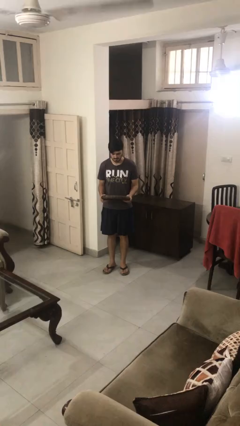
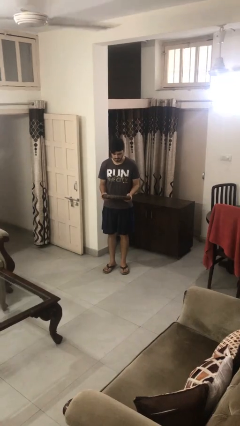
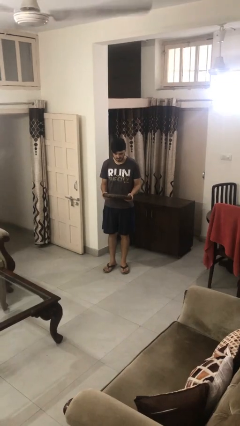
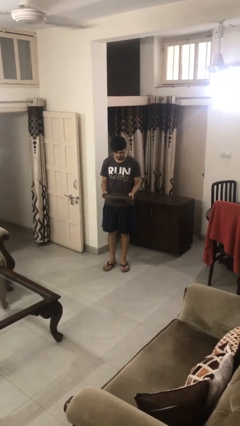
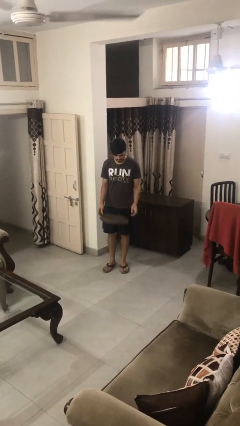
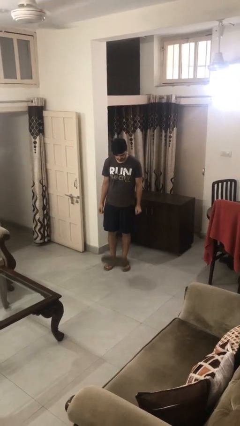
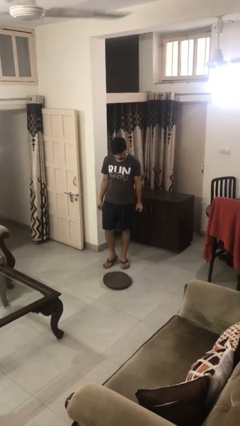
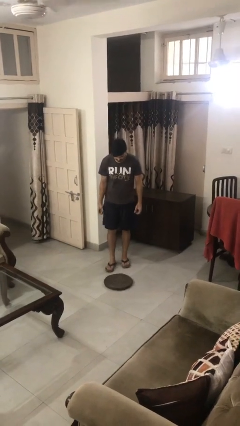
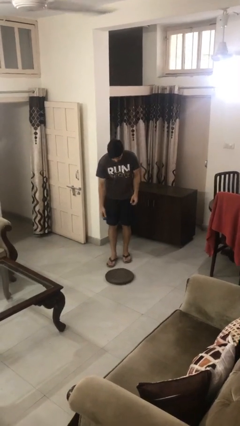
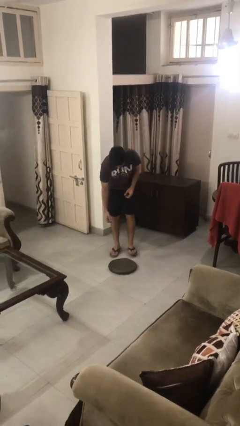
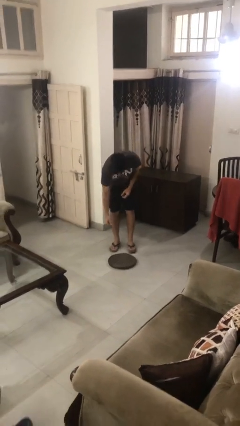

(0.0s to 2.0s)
person drops object

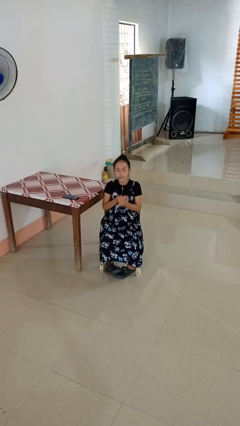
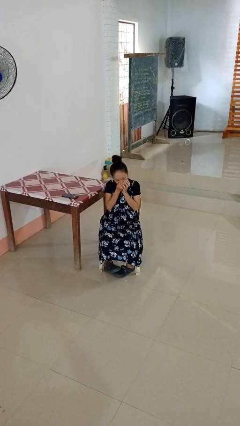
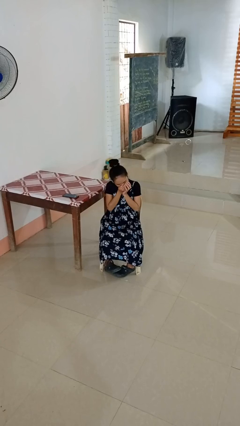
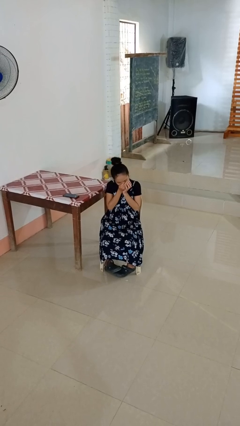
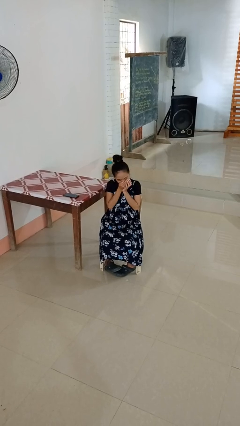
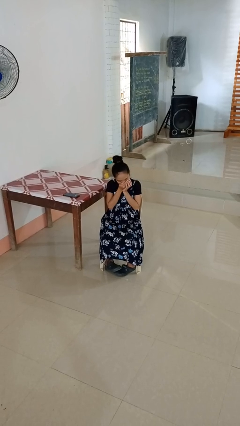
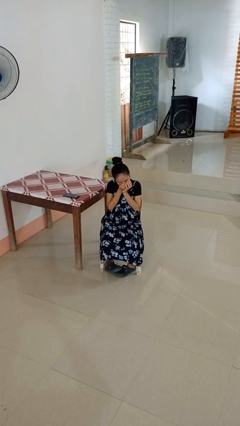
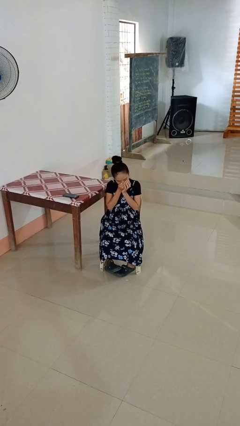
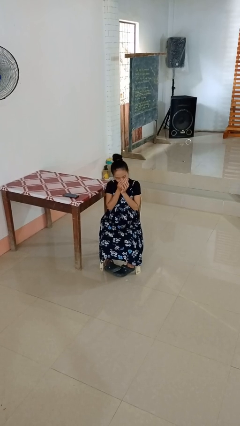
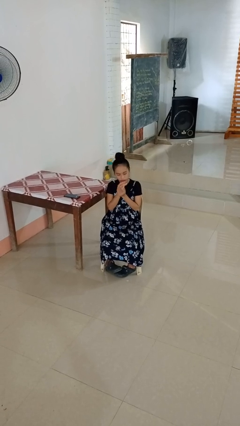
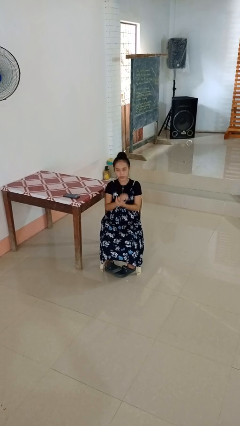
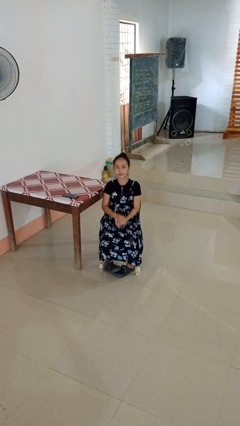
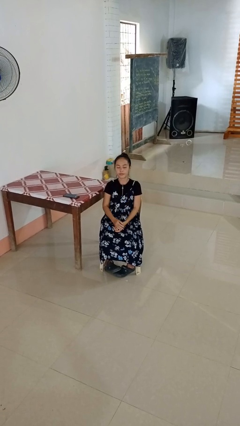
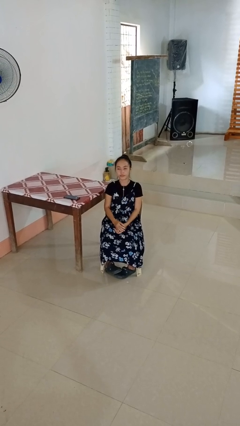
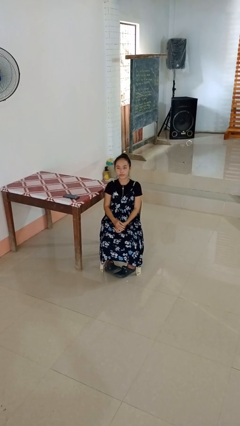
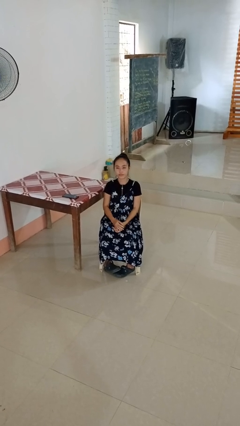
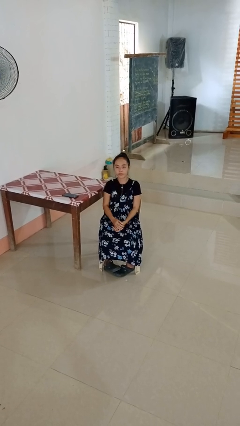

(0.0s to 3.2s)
person sneezes into hand

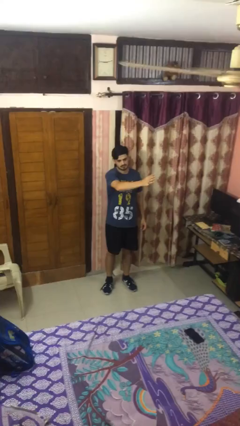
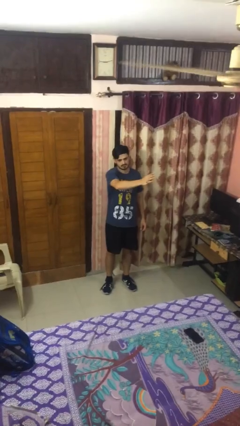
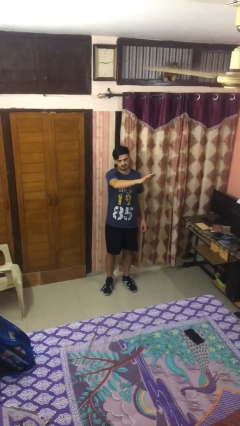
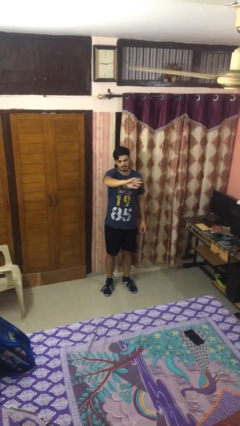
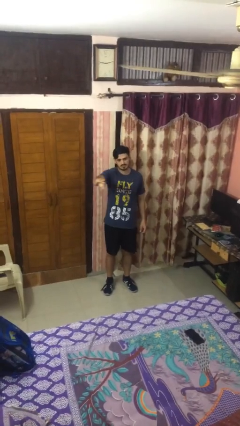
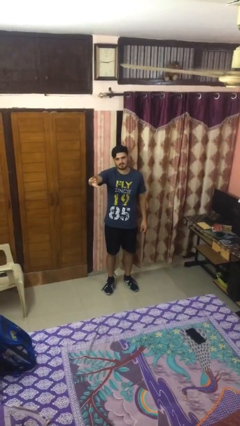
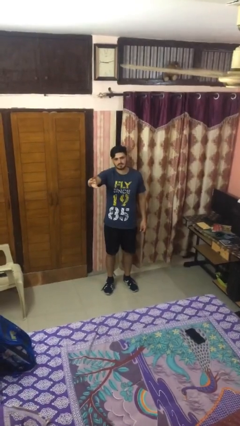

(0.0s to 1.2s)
person gestures swipe right

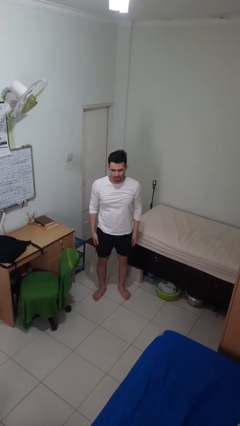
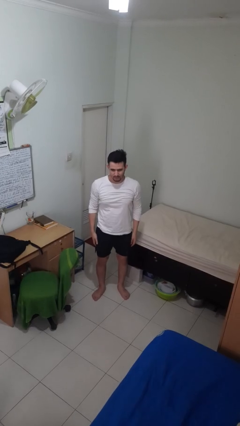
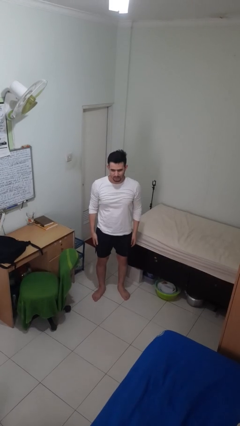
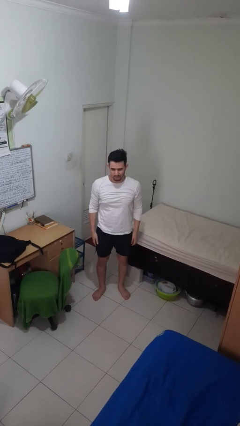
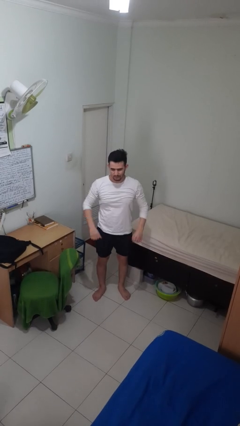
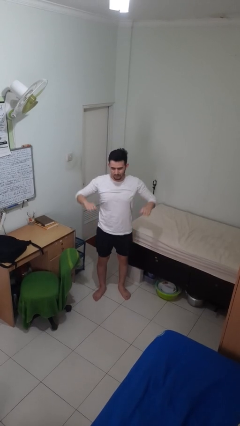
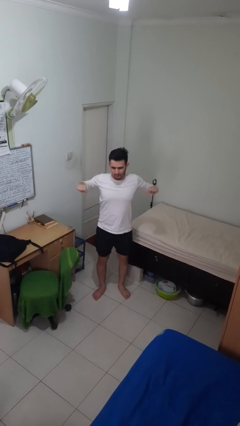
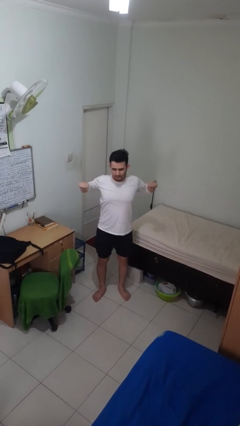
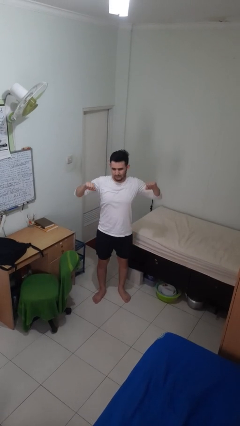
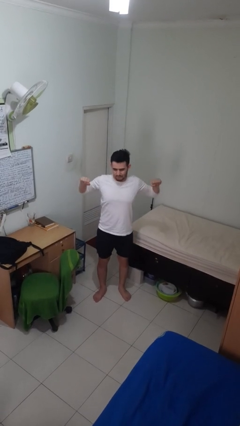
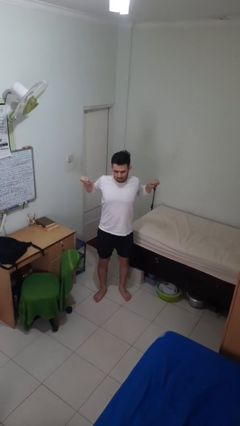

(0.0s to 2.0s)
person stretches back

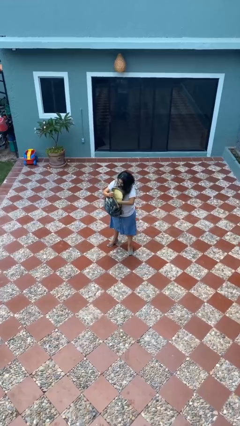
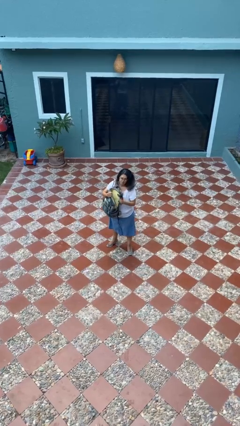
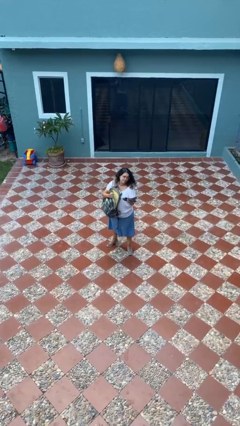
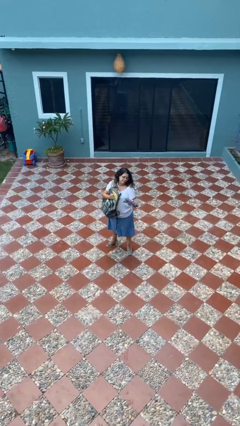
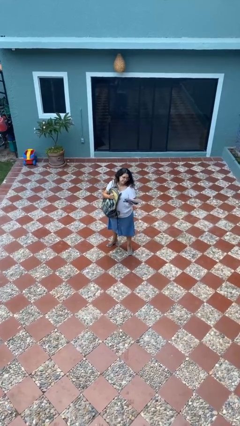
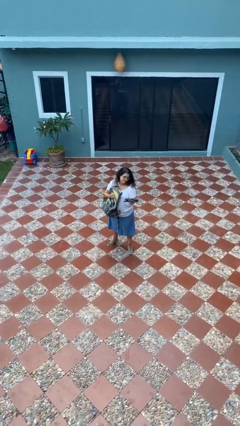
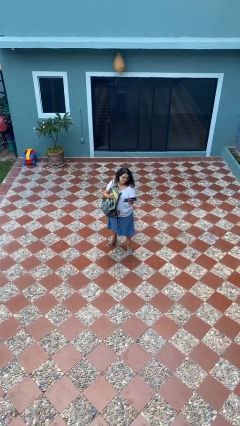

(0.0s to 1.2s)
person takes object from backpack

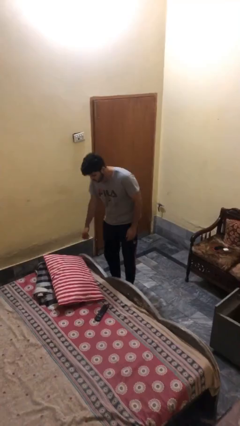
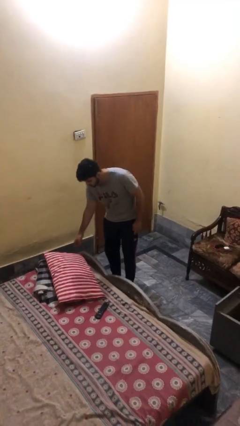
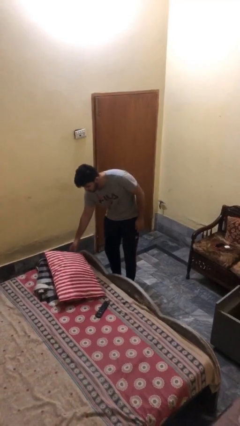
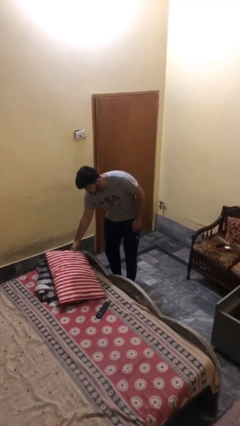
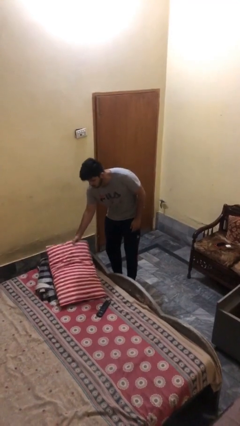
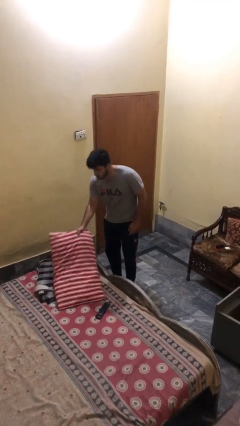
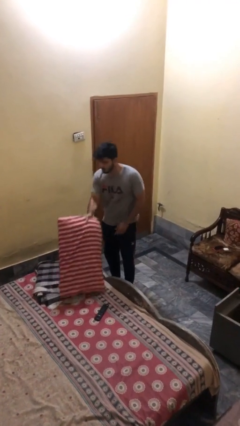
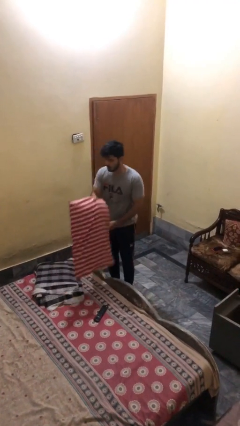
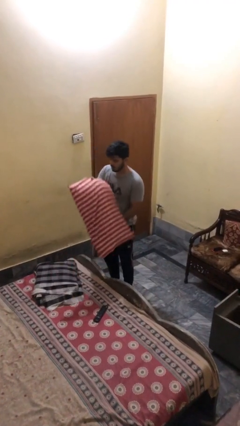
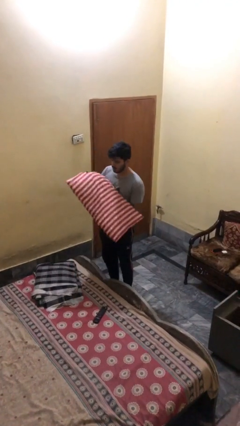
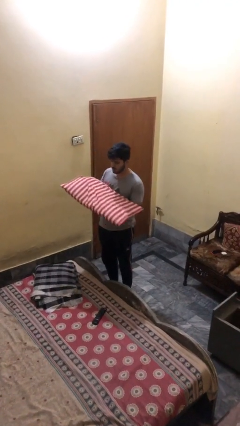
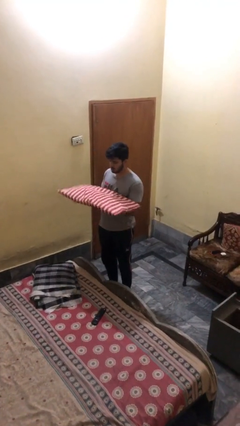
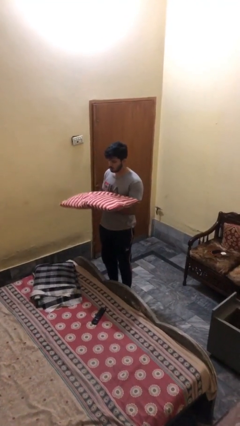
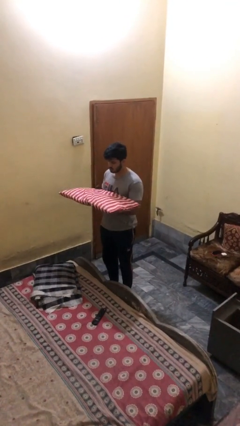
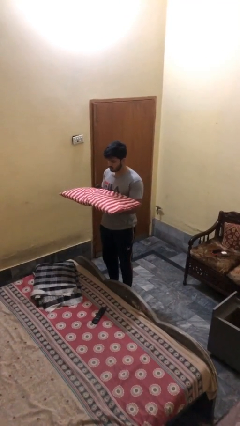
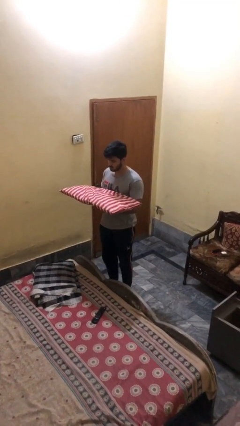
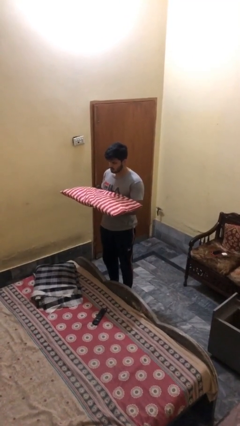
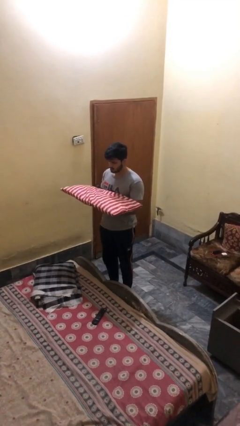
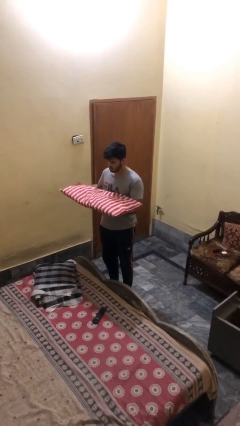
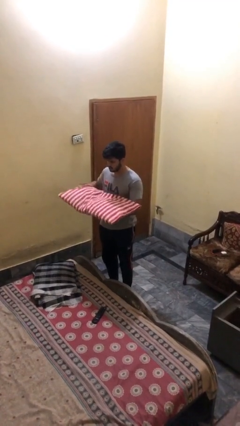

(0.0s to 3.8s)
person picks up object from bed

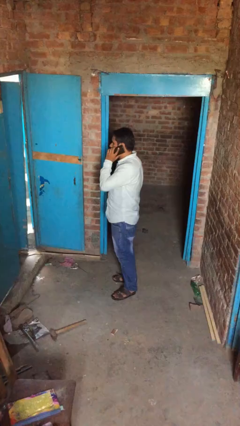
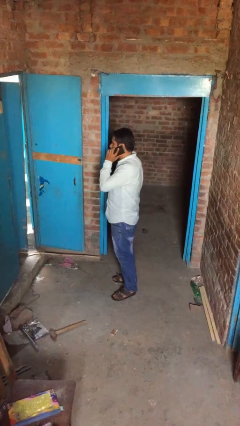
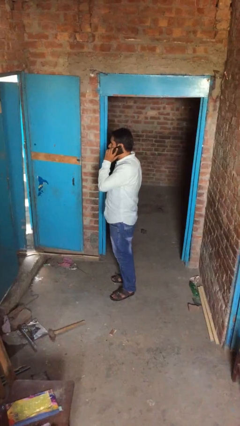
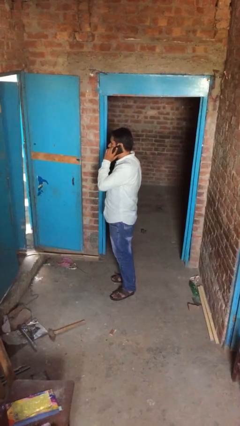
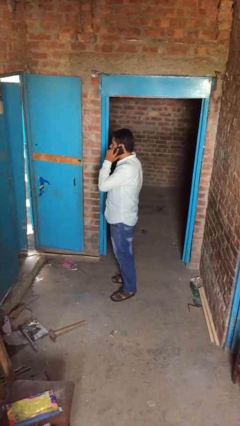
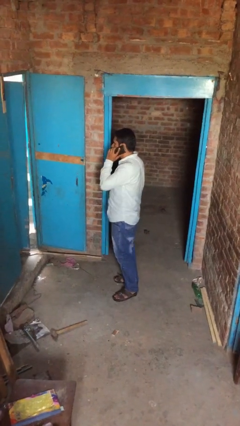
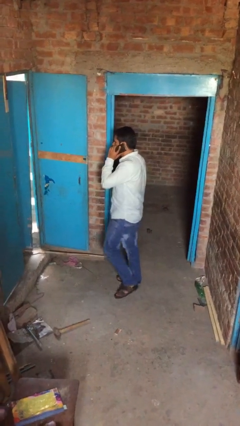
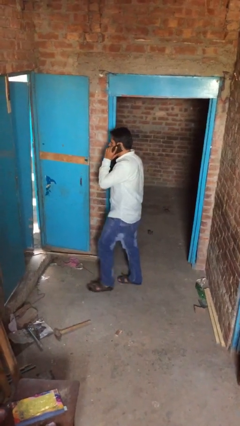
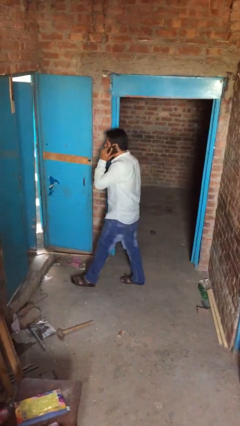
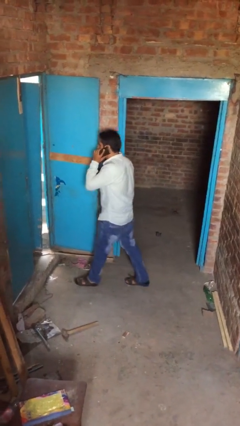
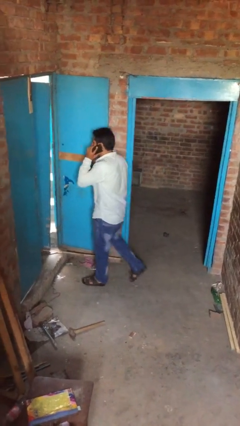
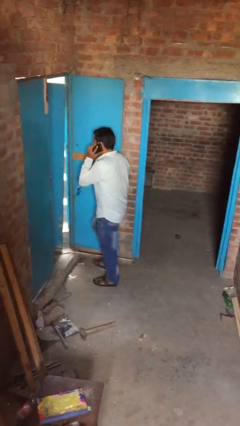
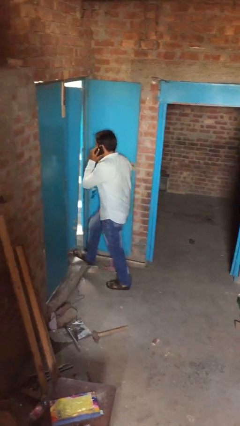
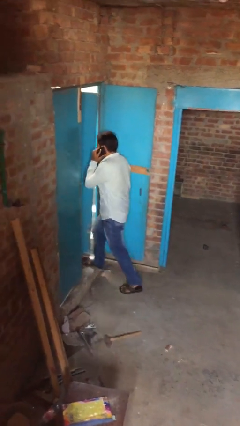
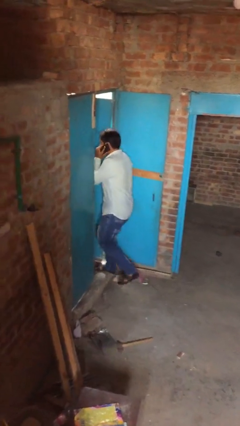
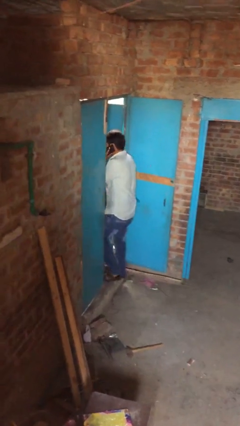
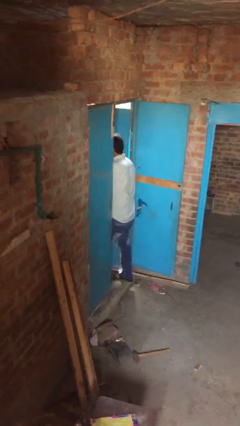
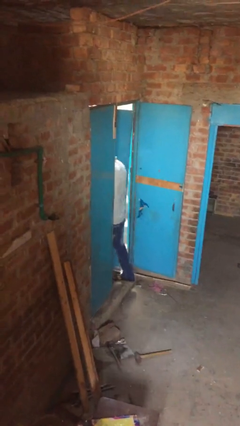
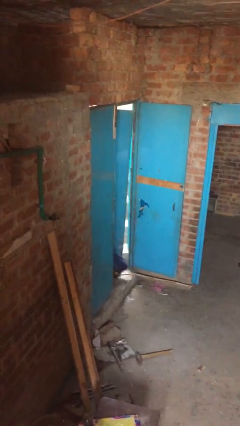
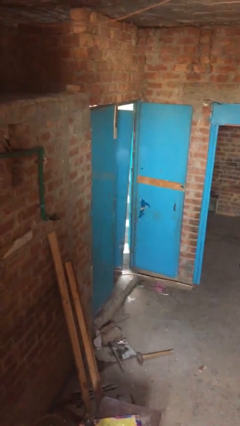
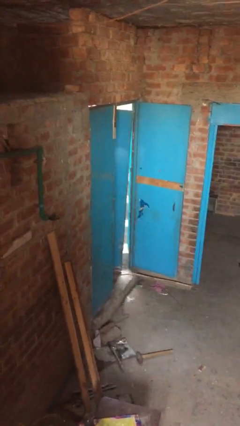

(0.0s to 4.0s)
person exits scene through structure
